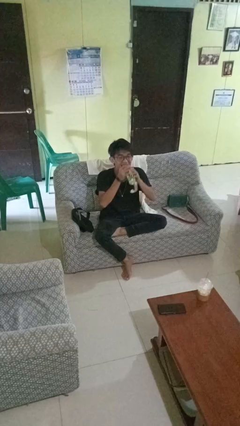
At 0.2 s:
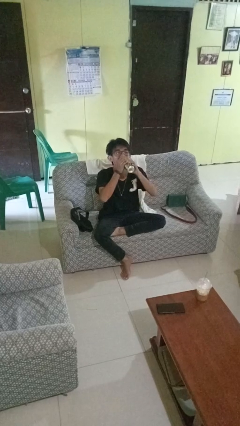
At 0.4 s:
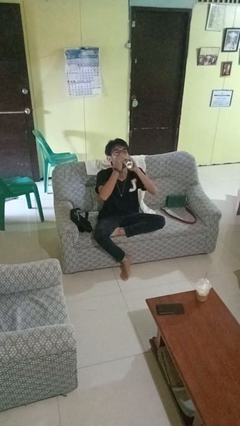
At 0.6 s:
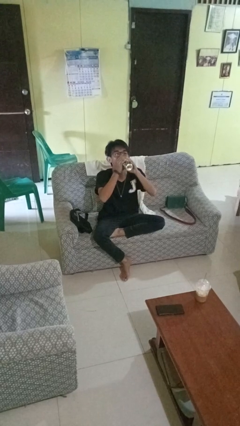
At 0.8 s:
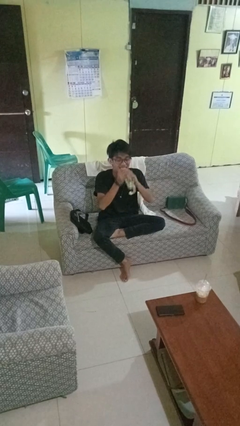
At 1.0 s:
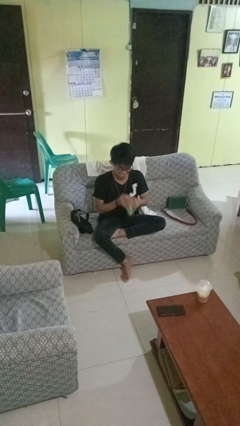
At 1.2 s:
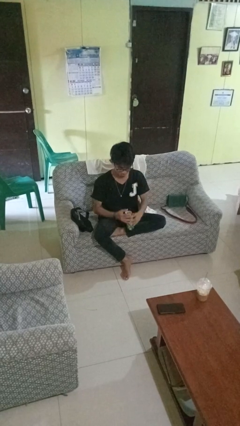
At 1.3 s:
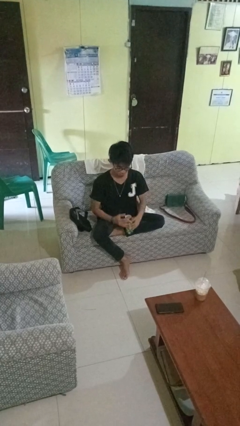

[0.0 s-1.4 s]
person drinks from beverage can

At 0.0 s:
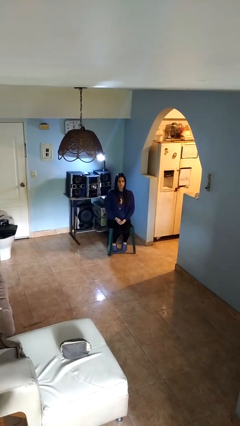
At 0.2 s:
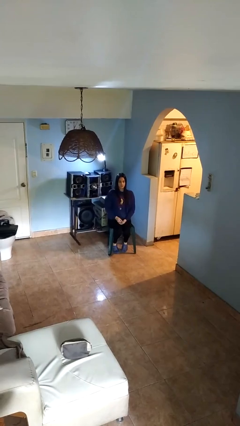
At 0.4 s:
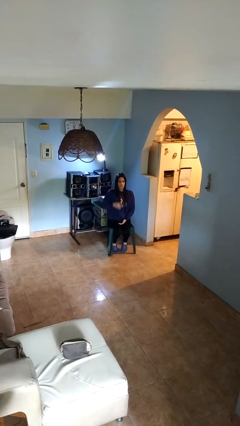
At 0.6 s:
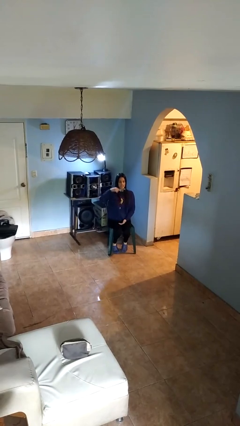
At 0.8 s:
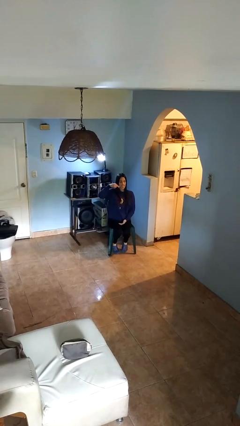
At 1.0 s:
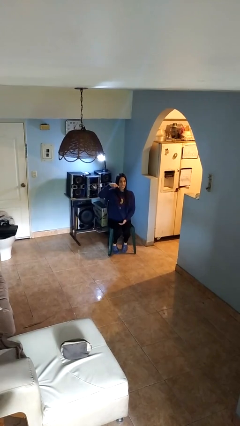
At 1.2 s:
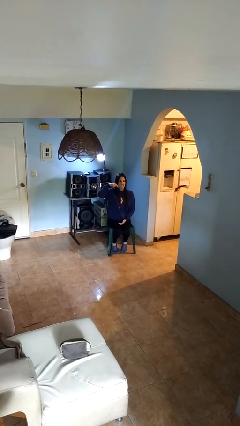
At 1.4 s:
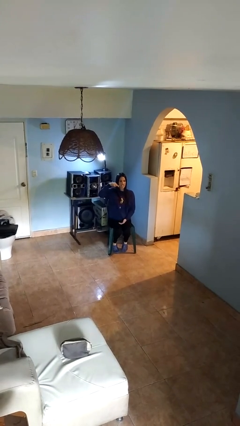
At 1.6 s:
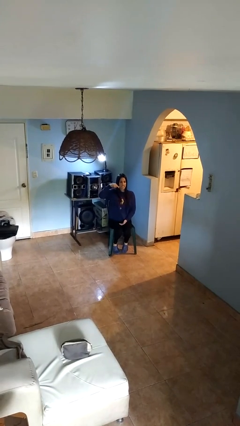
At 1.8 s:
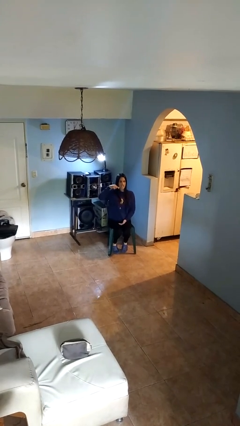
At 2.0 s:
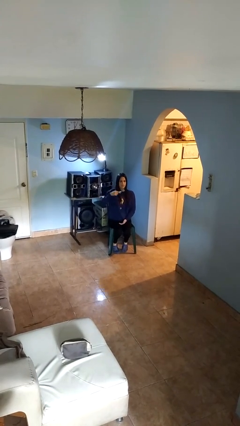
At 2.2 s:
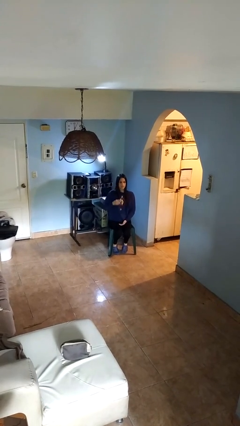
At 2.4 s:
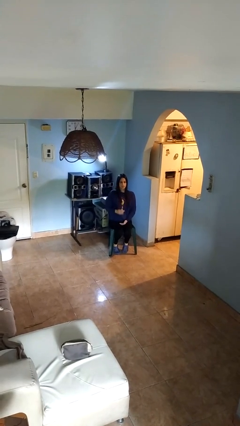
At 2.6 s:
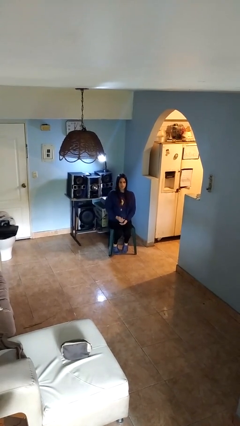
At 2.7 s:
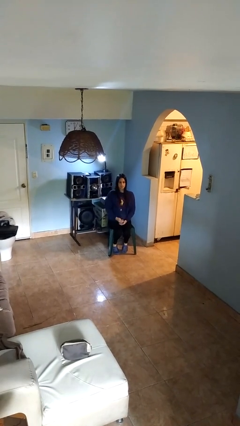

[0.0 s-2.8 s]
person brushes teeth

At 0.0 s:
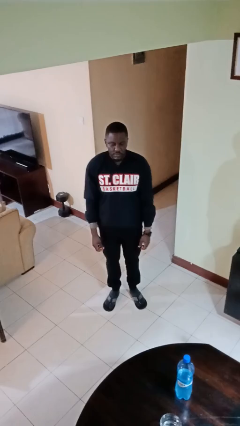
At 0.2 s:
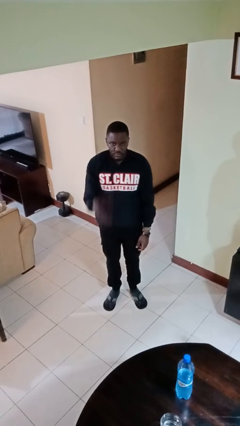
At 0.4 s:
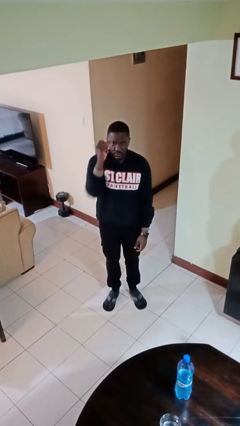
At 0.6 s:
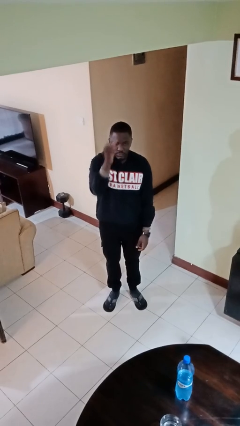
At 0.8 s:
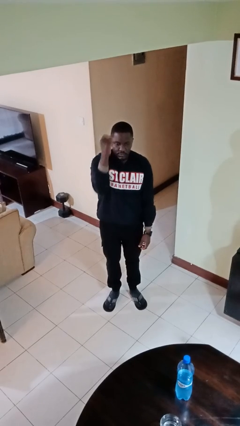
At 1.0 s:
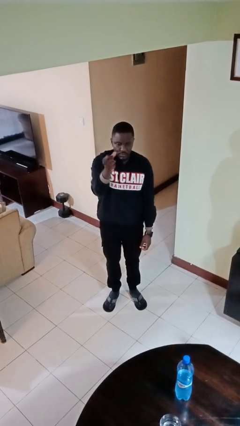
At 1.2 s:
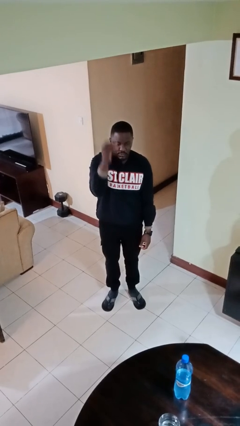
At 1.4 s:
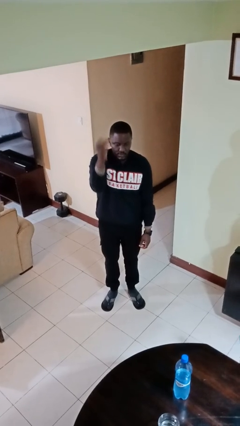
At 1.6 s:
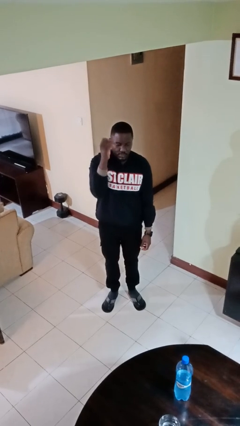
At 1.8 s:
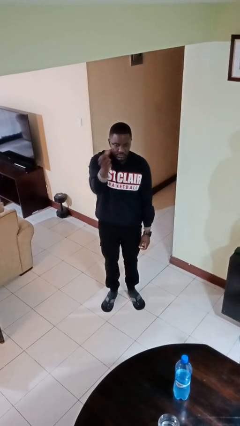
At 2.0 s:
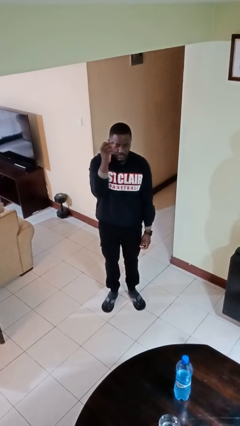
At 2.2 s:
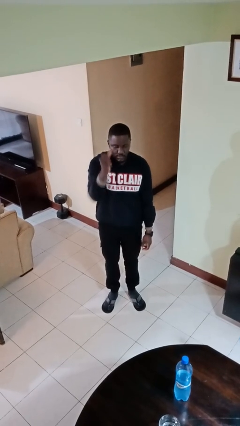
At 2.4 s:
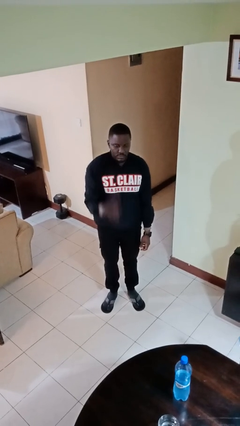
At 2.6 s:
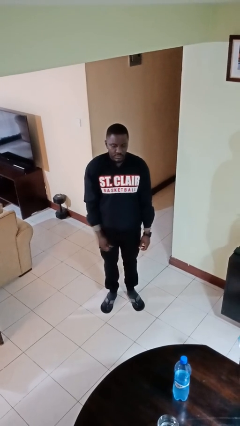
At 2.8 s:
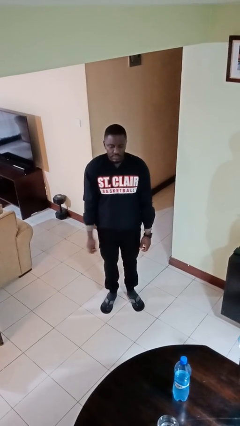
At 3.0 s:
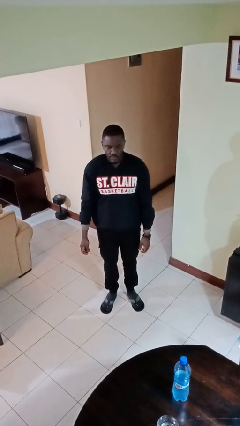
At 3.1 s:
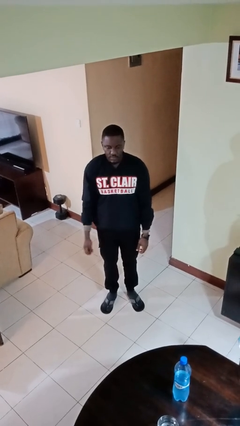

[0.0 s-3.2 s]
person snaps fingers

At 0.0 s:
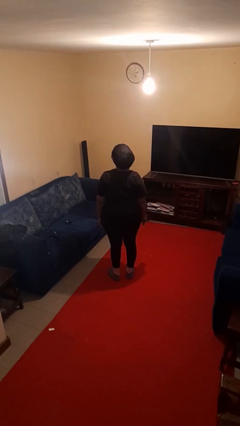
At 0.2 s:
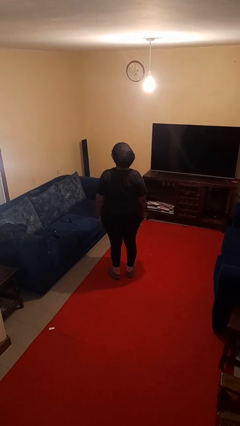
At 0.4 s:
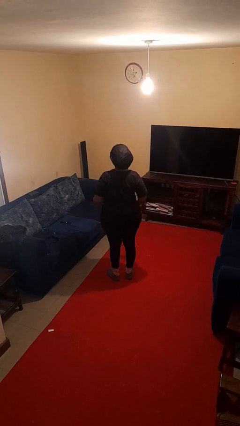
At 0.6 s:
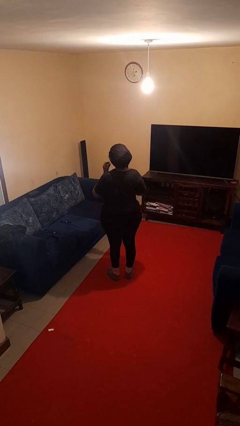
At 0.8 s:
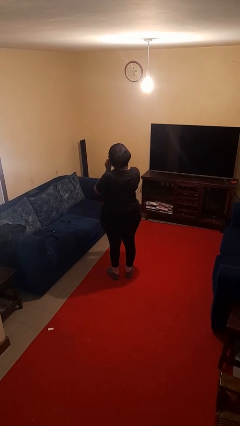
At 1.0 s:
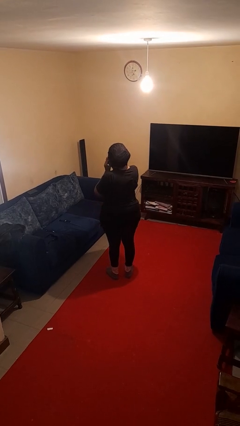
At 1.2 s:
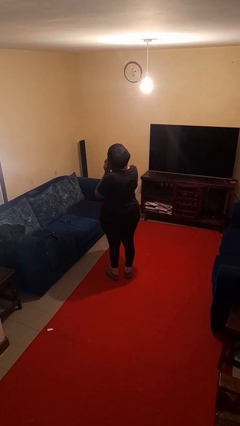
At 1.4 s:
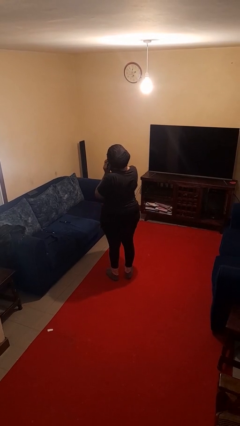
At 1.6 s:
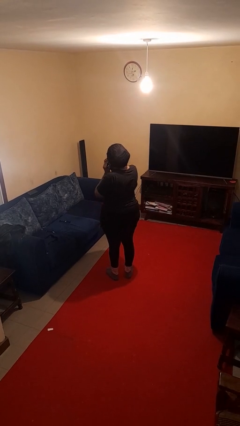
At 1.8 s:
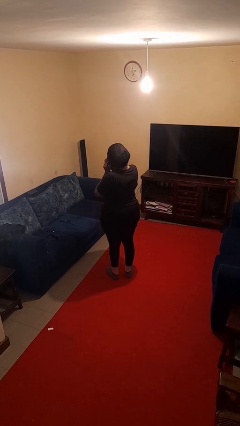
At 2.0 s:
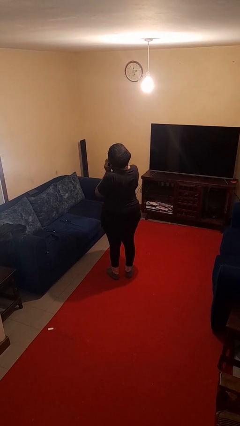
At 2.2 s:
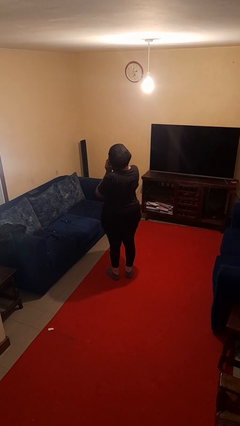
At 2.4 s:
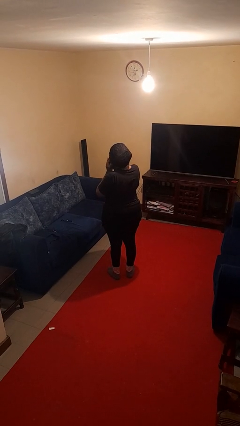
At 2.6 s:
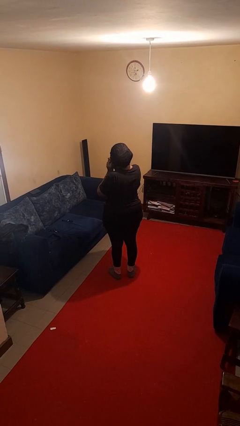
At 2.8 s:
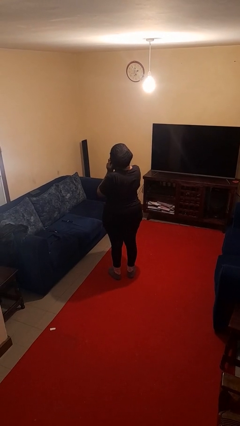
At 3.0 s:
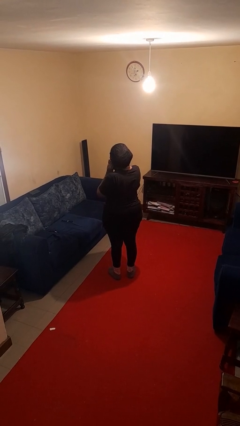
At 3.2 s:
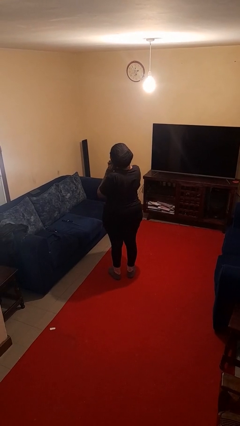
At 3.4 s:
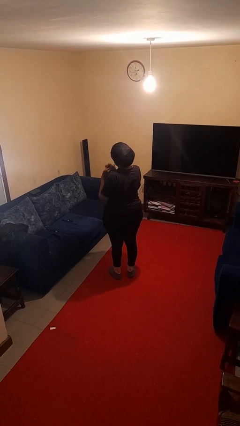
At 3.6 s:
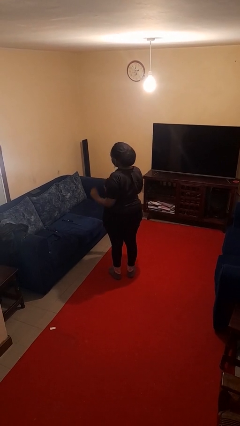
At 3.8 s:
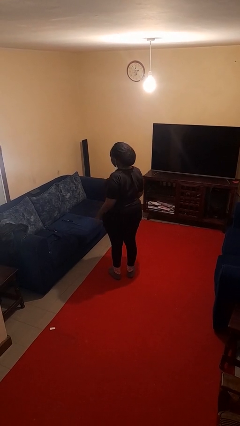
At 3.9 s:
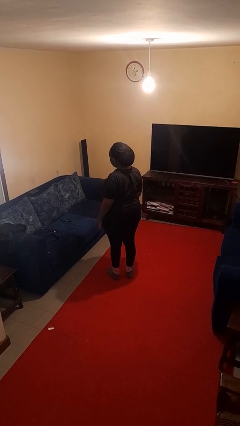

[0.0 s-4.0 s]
person puts on earrings

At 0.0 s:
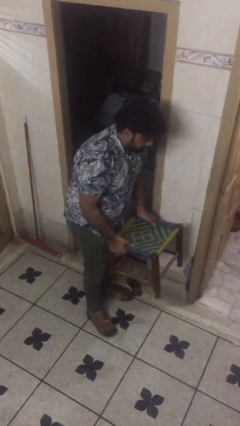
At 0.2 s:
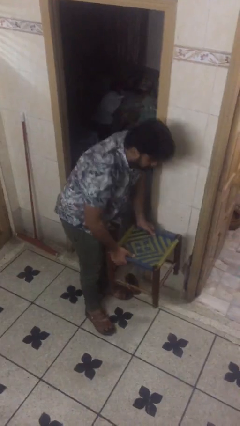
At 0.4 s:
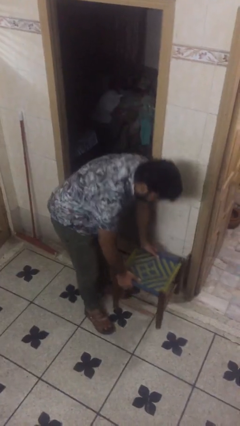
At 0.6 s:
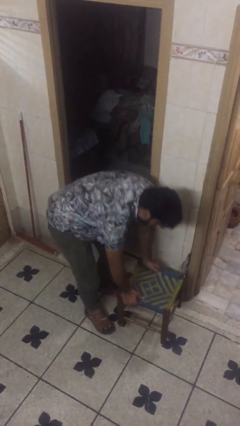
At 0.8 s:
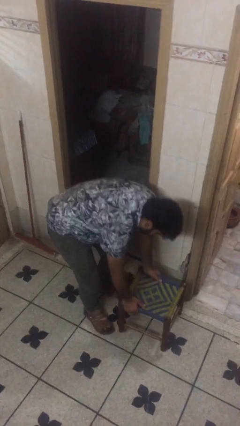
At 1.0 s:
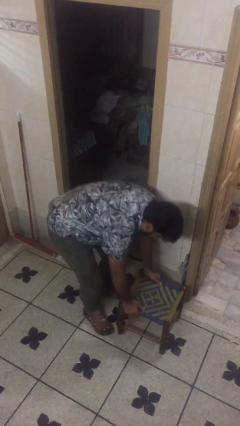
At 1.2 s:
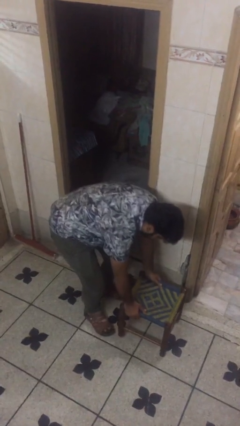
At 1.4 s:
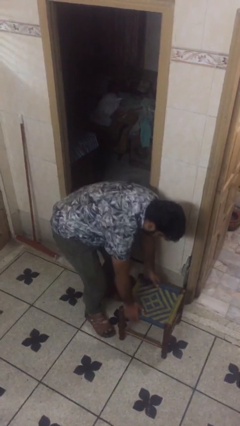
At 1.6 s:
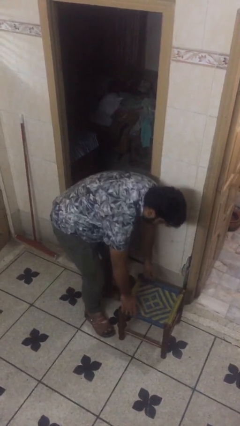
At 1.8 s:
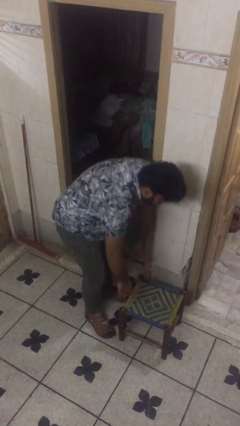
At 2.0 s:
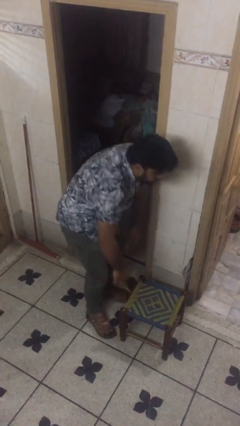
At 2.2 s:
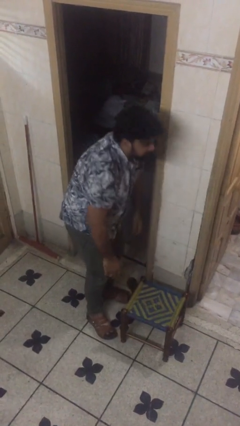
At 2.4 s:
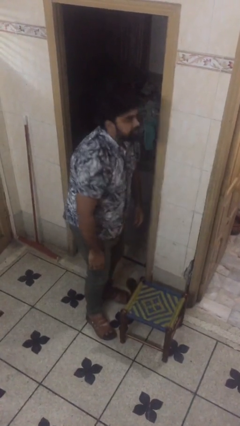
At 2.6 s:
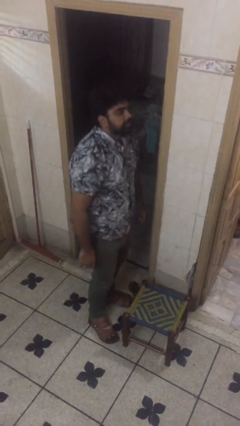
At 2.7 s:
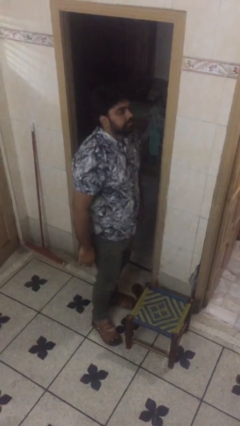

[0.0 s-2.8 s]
person puts down object on floor

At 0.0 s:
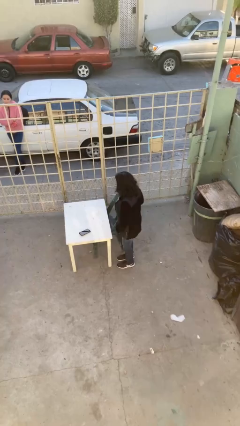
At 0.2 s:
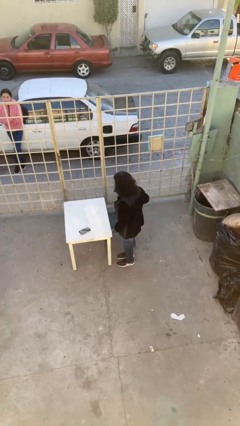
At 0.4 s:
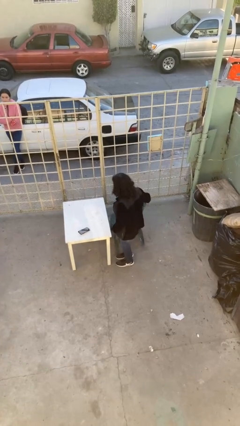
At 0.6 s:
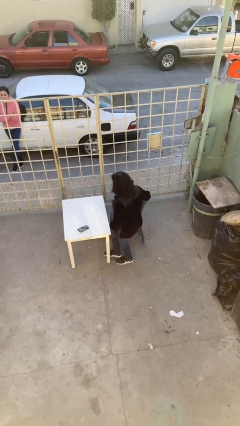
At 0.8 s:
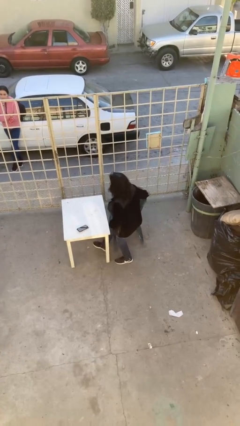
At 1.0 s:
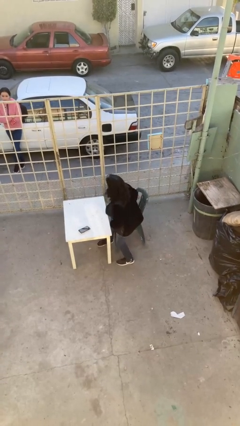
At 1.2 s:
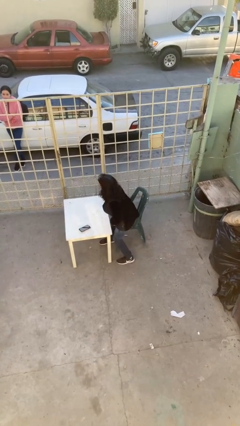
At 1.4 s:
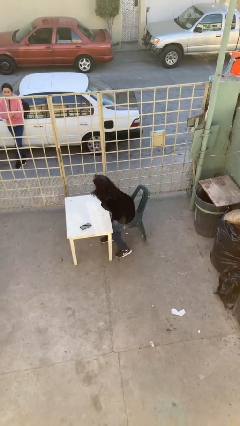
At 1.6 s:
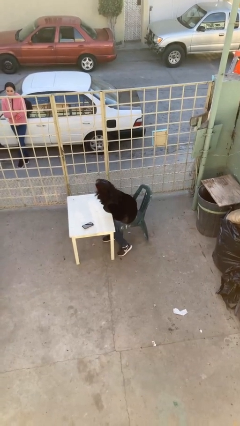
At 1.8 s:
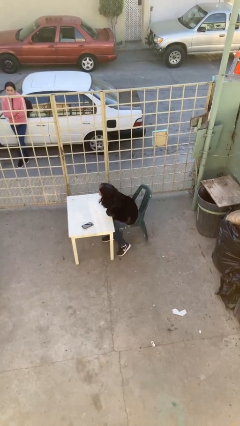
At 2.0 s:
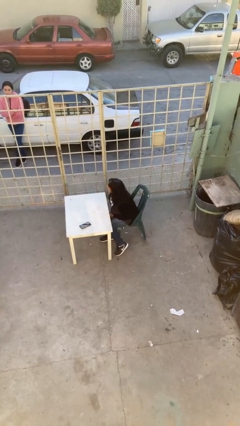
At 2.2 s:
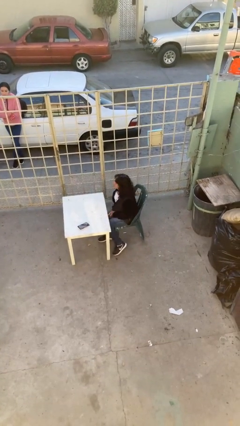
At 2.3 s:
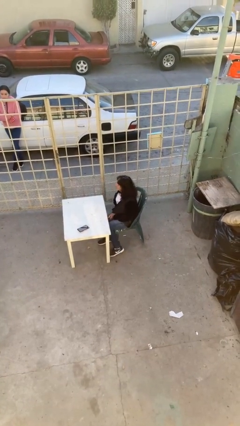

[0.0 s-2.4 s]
person sits down

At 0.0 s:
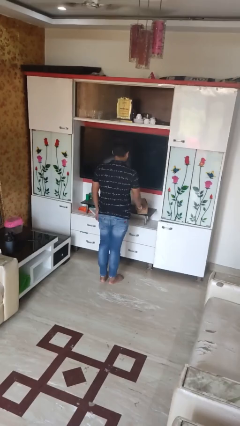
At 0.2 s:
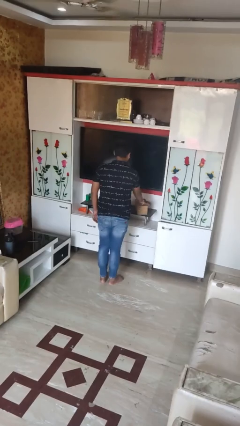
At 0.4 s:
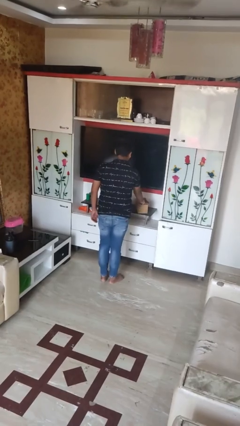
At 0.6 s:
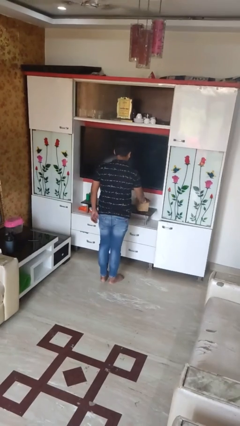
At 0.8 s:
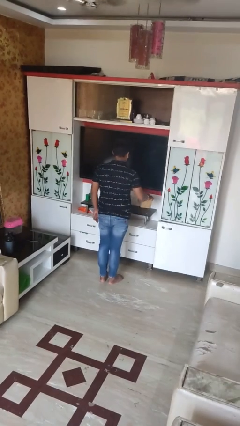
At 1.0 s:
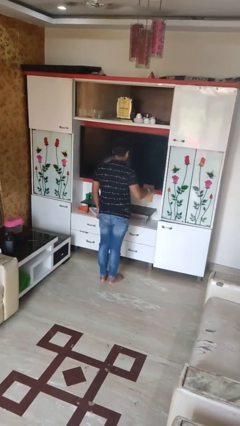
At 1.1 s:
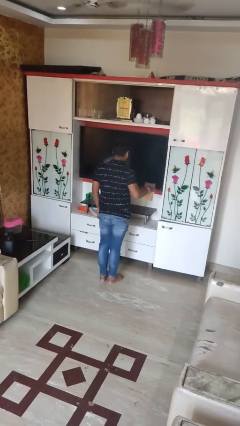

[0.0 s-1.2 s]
person picks up object from countertop
